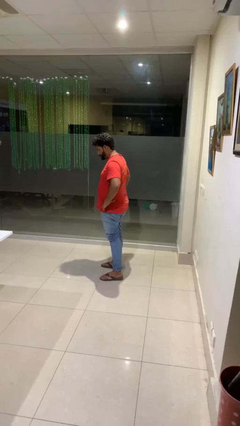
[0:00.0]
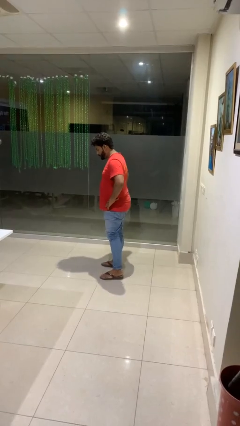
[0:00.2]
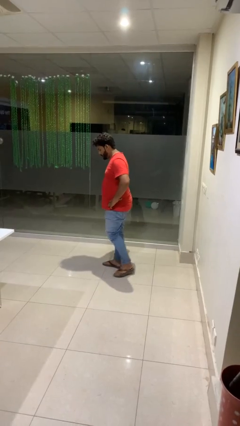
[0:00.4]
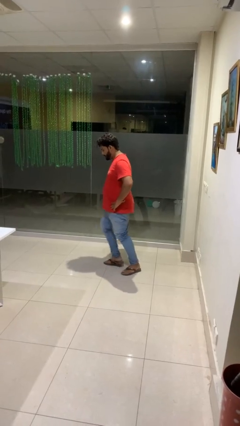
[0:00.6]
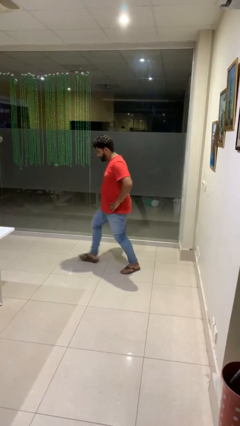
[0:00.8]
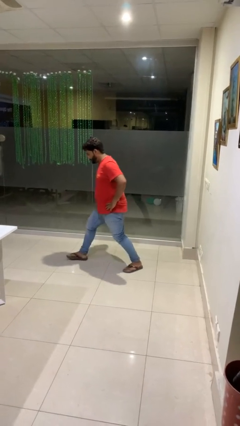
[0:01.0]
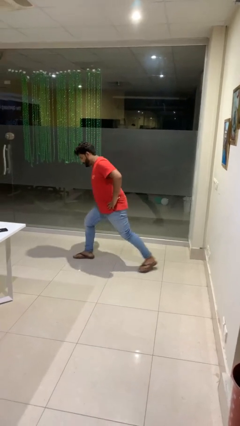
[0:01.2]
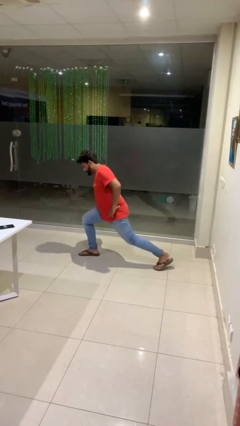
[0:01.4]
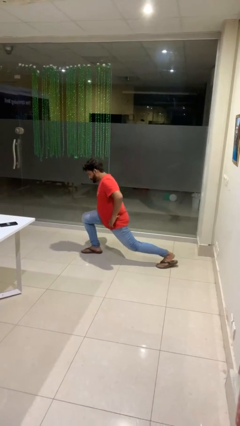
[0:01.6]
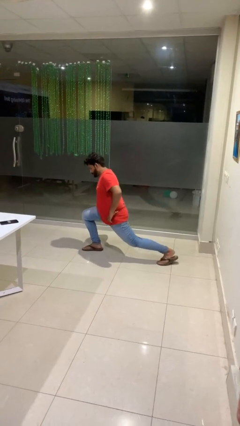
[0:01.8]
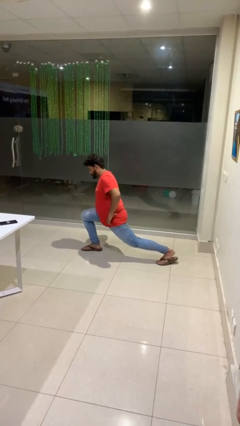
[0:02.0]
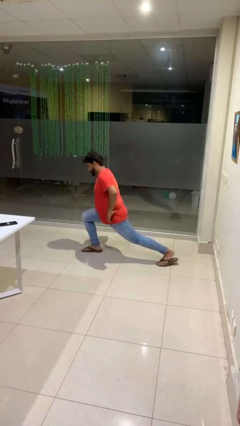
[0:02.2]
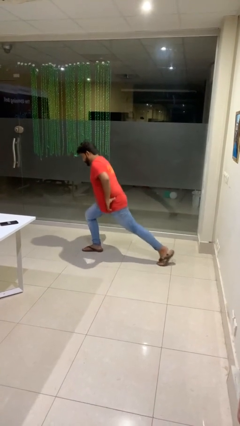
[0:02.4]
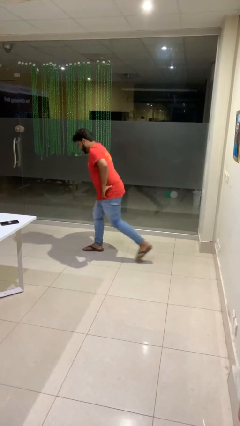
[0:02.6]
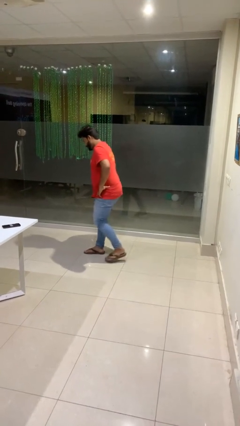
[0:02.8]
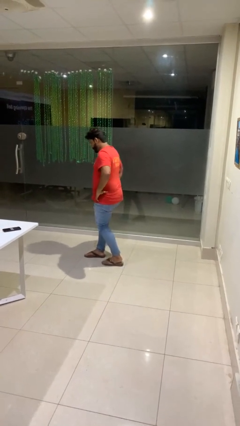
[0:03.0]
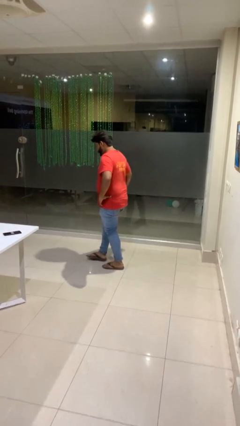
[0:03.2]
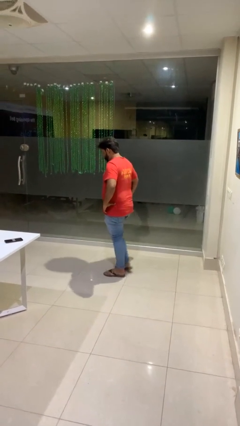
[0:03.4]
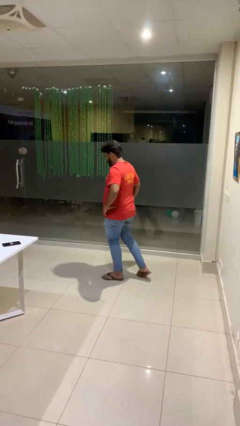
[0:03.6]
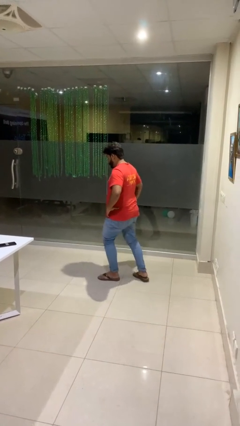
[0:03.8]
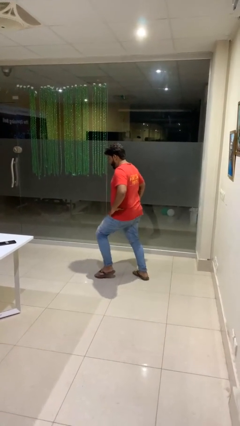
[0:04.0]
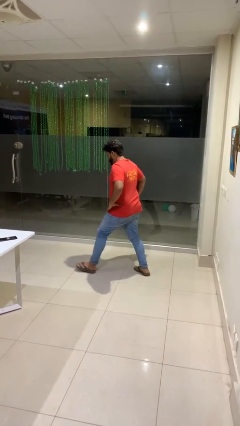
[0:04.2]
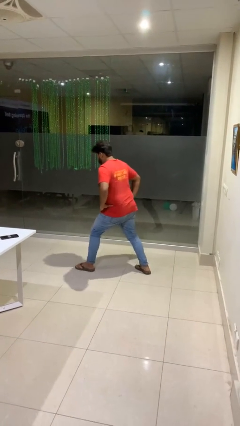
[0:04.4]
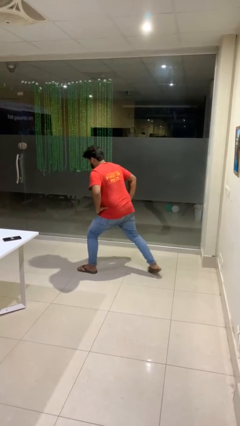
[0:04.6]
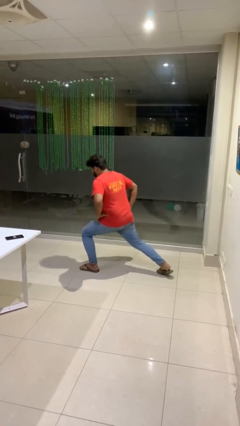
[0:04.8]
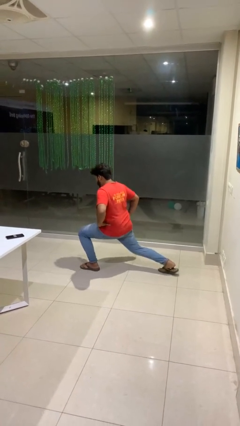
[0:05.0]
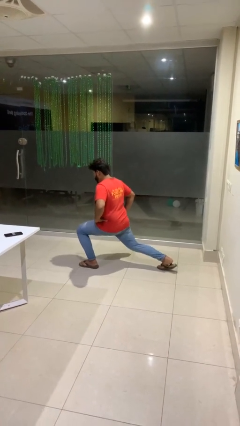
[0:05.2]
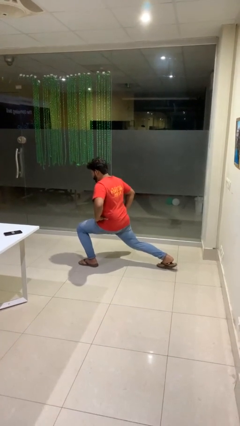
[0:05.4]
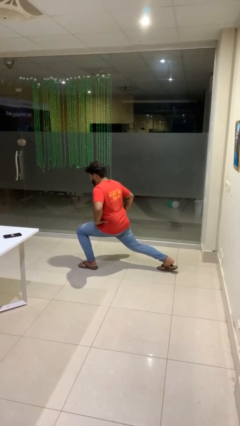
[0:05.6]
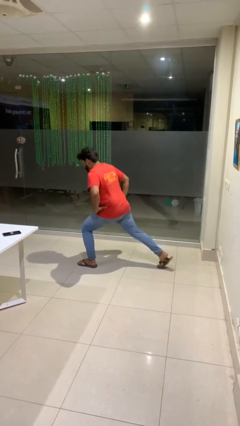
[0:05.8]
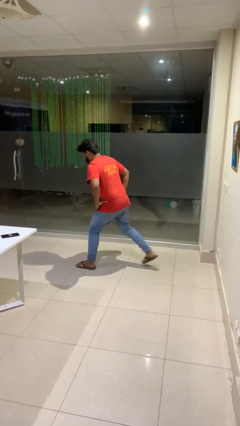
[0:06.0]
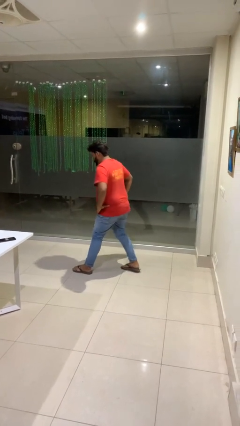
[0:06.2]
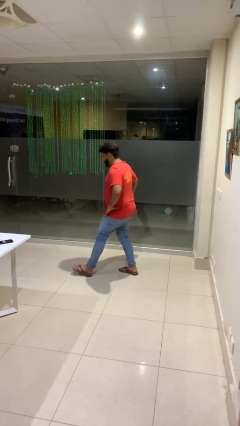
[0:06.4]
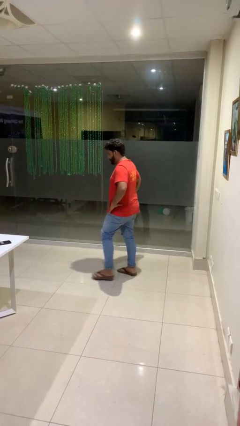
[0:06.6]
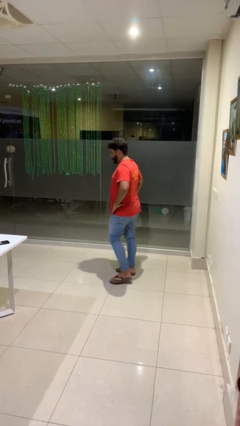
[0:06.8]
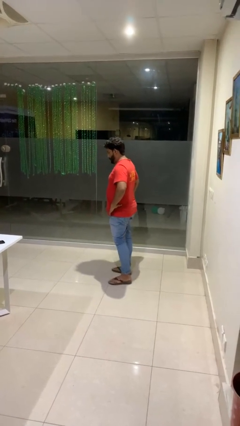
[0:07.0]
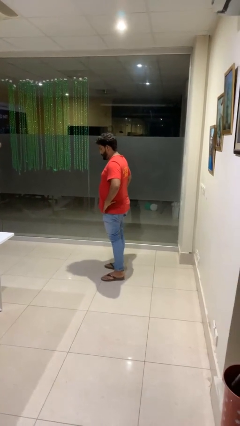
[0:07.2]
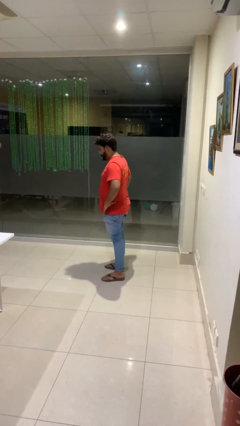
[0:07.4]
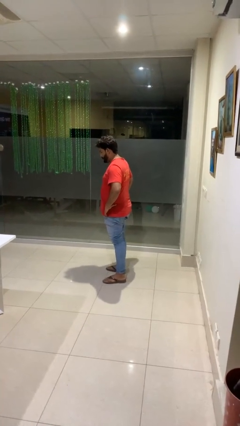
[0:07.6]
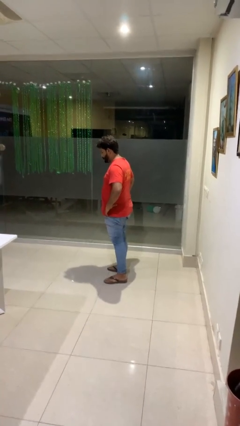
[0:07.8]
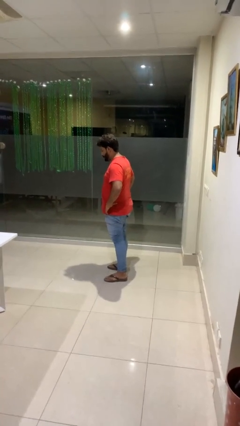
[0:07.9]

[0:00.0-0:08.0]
person exercises with lunges

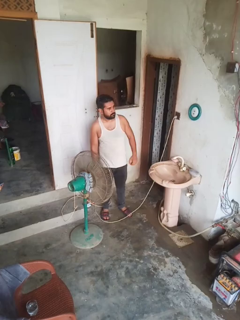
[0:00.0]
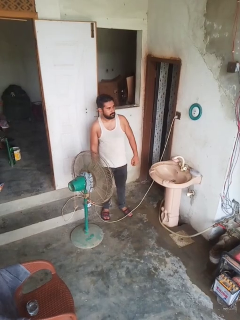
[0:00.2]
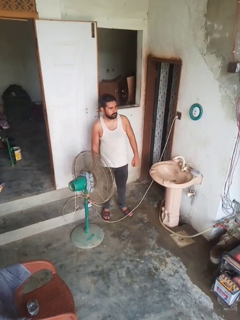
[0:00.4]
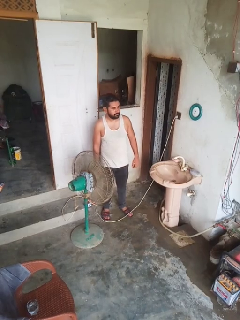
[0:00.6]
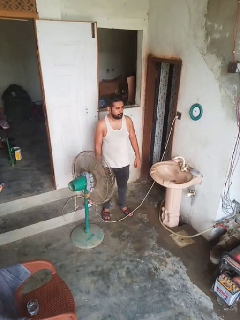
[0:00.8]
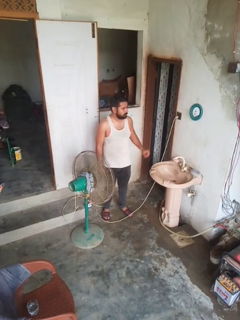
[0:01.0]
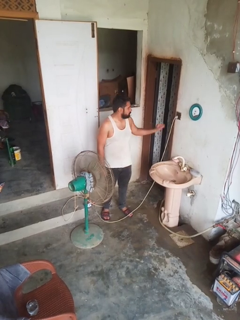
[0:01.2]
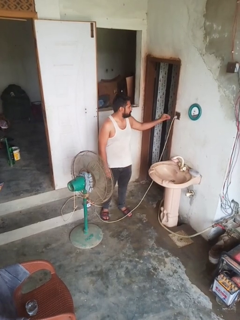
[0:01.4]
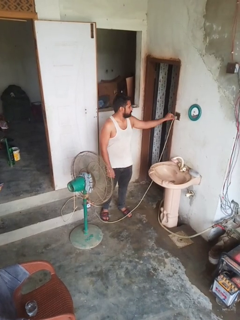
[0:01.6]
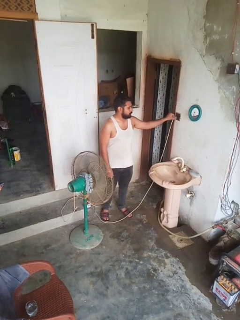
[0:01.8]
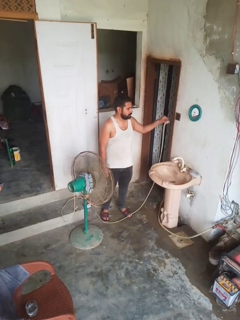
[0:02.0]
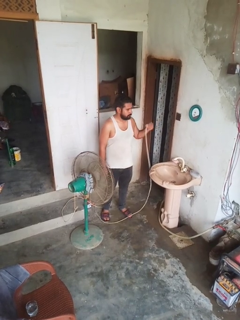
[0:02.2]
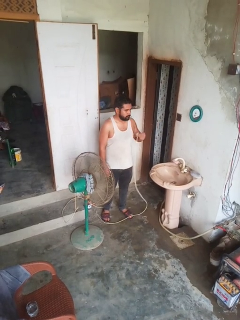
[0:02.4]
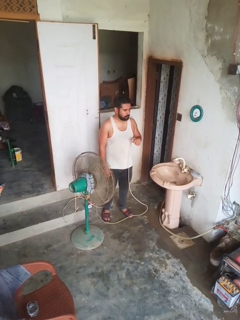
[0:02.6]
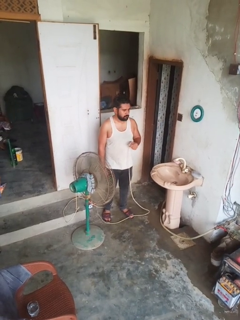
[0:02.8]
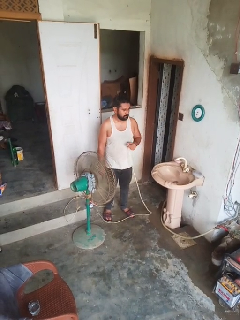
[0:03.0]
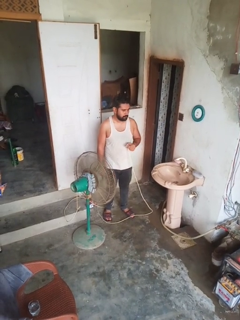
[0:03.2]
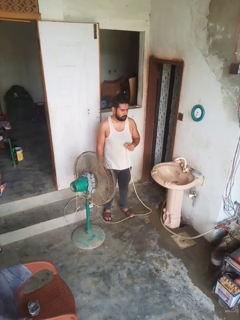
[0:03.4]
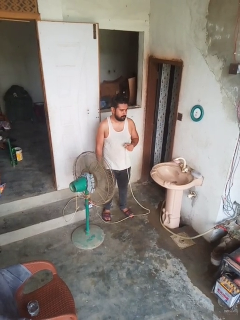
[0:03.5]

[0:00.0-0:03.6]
person turns off fan

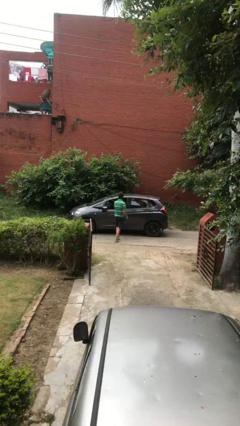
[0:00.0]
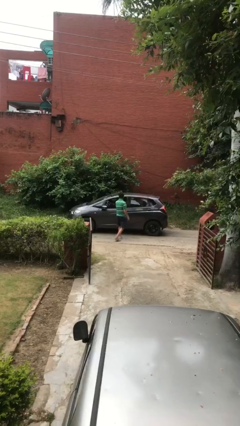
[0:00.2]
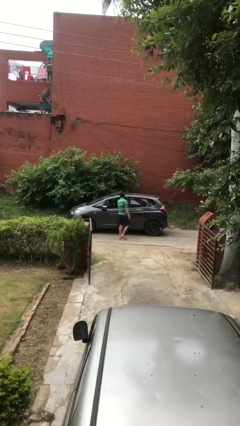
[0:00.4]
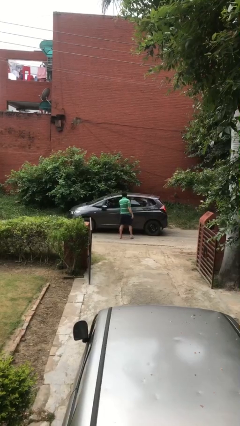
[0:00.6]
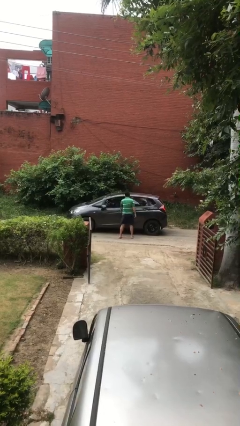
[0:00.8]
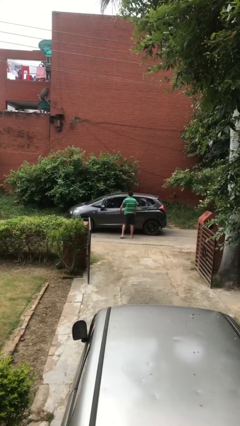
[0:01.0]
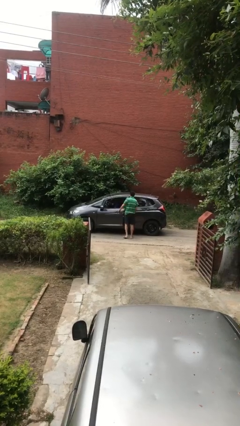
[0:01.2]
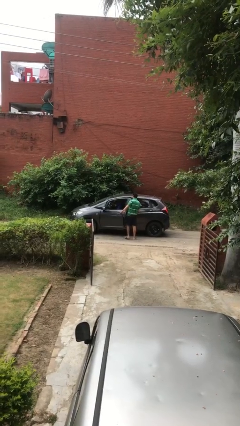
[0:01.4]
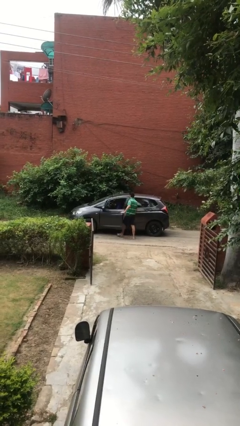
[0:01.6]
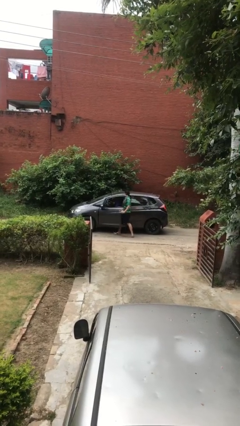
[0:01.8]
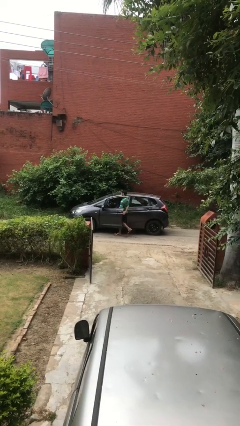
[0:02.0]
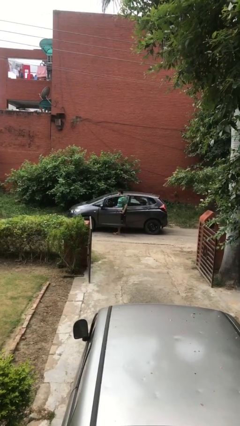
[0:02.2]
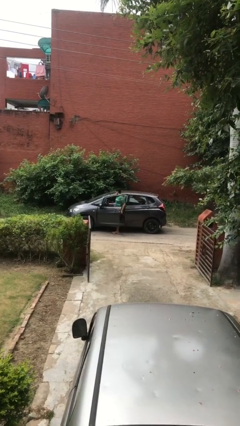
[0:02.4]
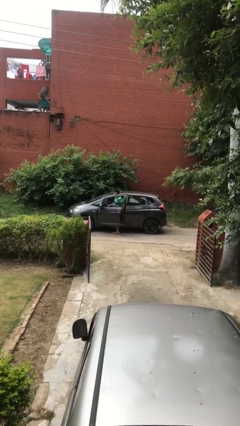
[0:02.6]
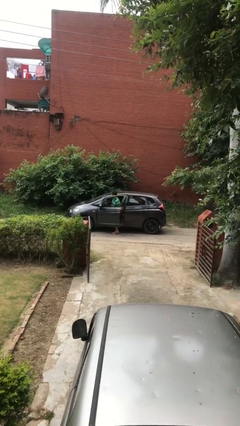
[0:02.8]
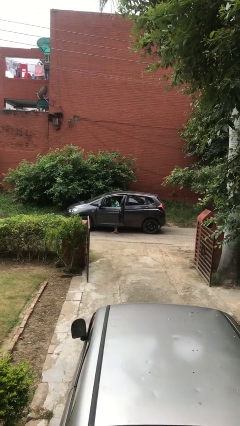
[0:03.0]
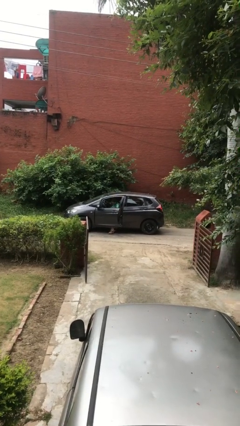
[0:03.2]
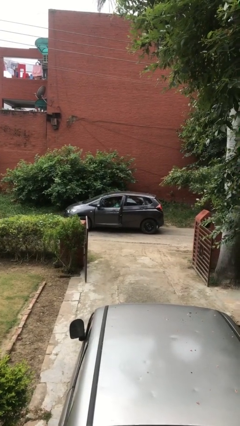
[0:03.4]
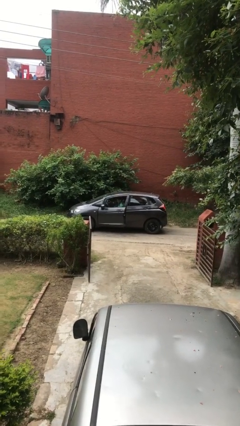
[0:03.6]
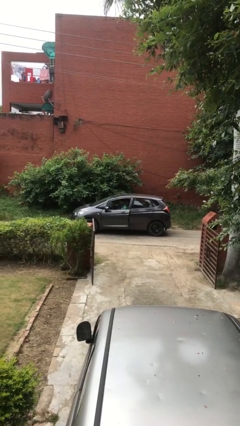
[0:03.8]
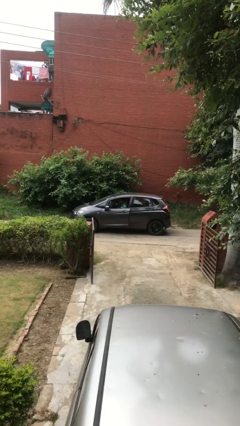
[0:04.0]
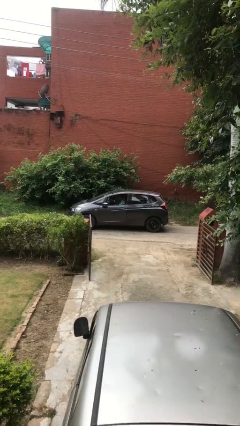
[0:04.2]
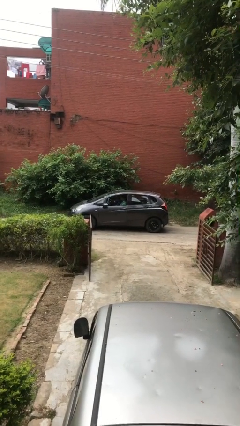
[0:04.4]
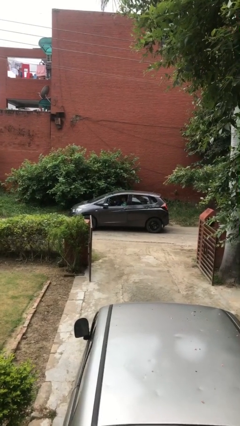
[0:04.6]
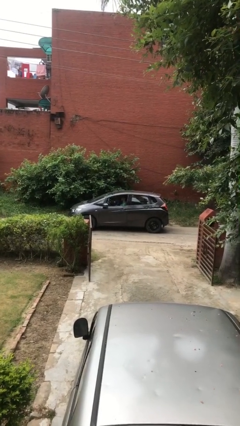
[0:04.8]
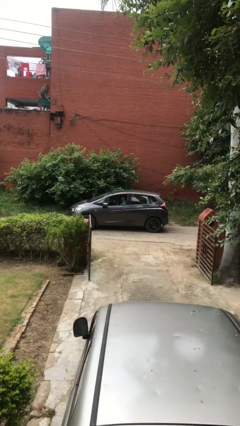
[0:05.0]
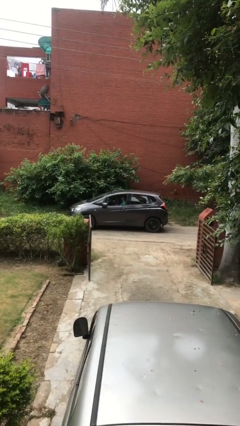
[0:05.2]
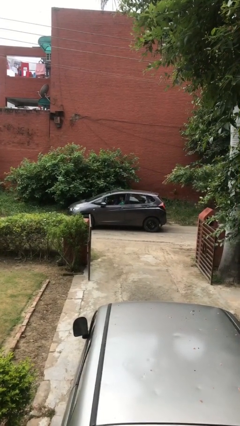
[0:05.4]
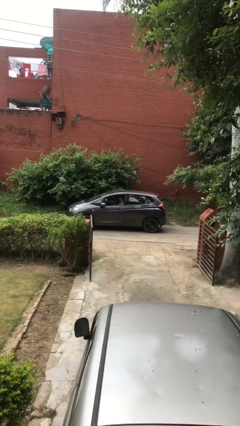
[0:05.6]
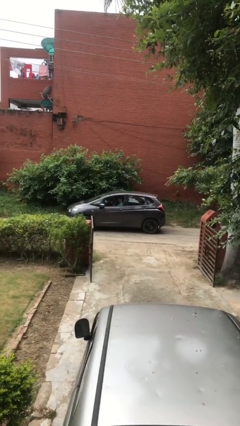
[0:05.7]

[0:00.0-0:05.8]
car picks up person

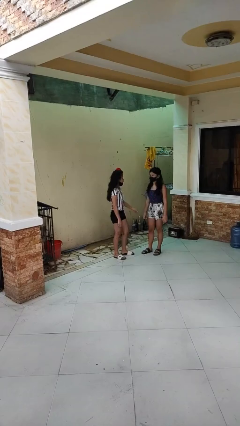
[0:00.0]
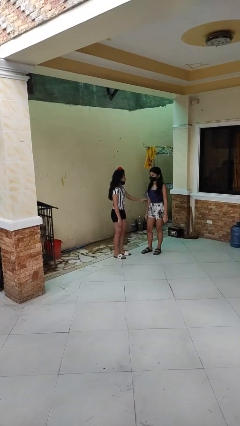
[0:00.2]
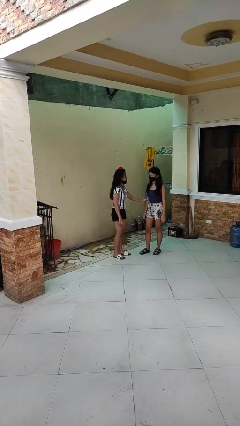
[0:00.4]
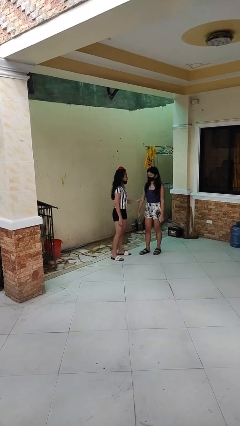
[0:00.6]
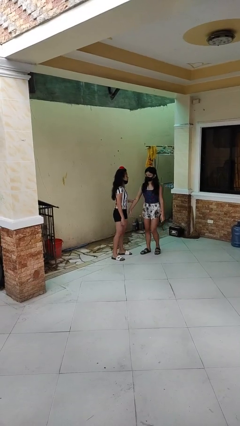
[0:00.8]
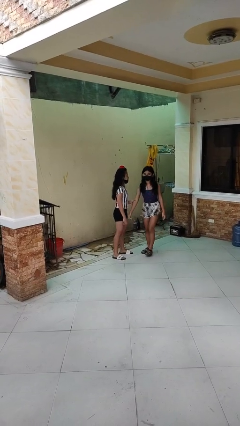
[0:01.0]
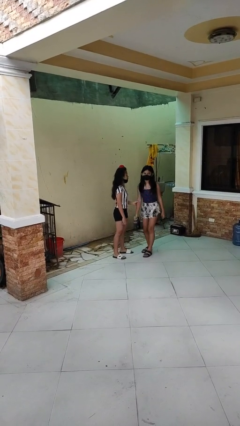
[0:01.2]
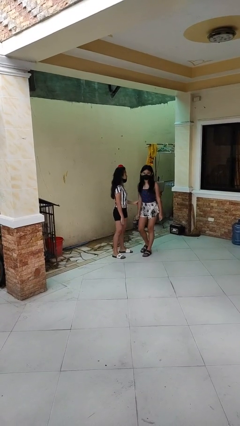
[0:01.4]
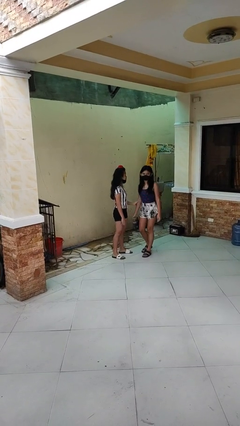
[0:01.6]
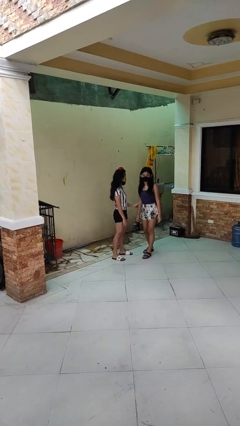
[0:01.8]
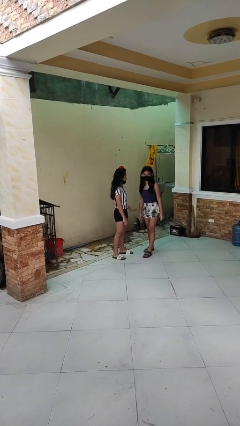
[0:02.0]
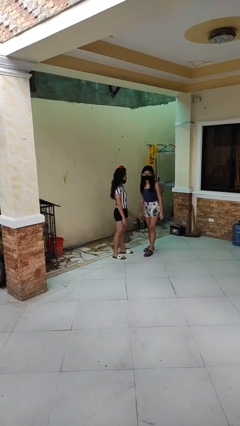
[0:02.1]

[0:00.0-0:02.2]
person grabs person by forearm
